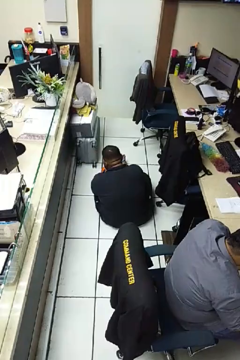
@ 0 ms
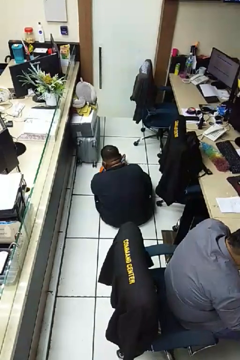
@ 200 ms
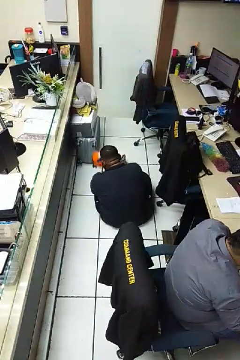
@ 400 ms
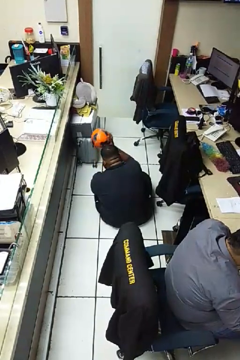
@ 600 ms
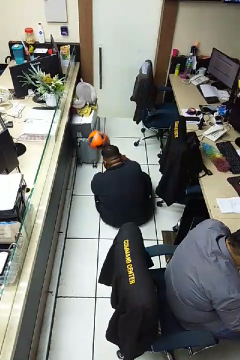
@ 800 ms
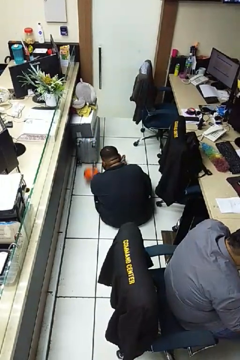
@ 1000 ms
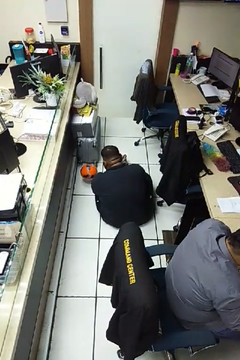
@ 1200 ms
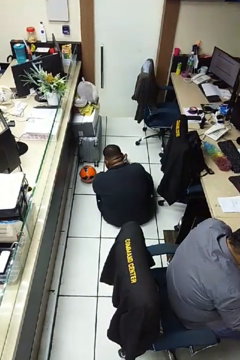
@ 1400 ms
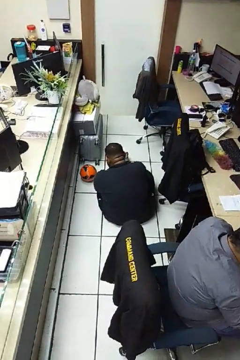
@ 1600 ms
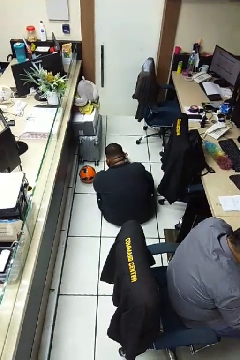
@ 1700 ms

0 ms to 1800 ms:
person bounces ball on floor

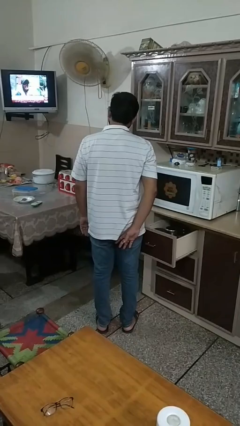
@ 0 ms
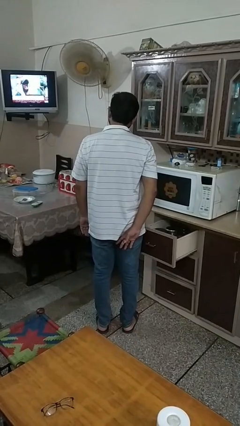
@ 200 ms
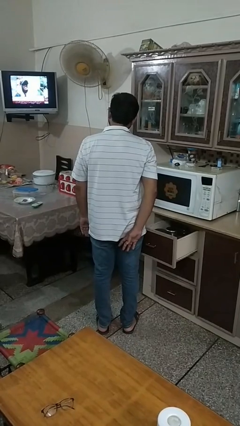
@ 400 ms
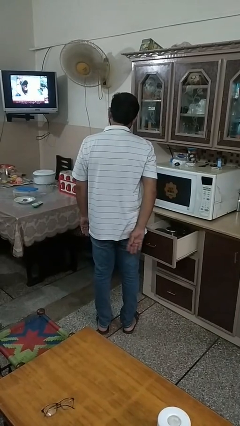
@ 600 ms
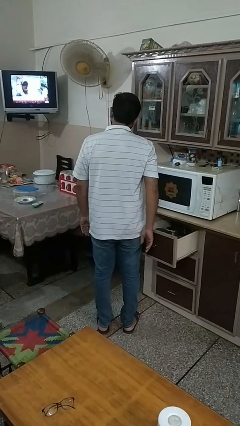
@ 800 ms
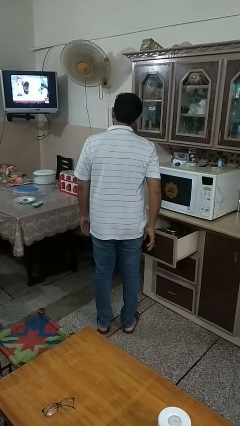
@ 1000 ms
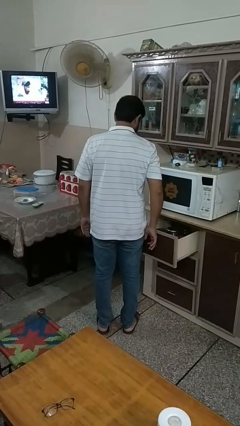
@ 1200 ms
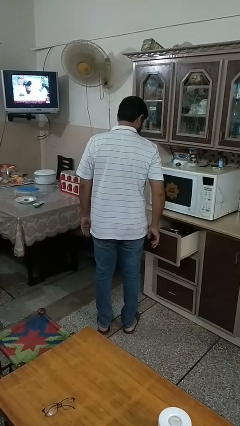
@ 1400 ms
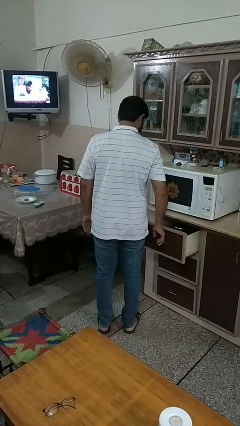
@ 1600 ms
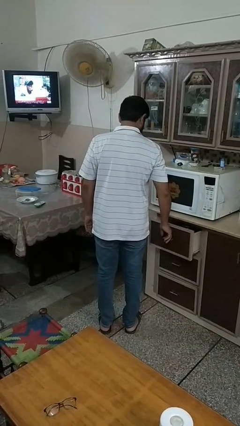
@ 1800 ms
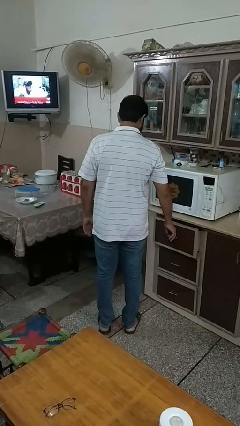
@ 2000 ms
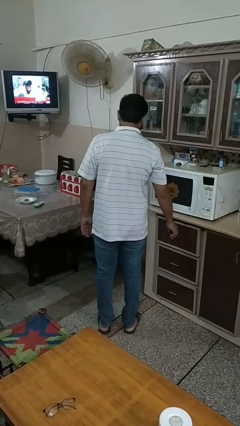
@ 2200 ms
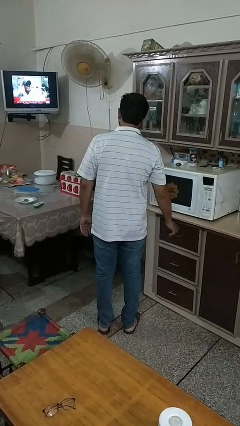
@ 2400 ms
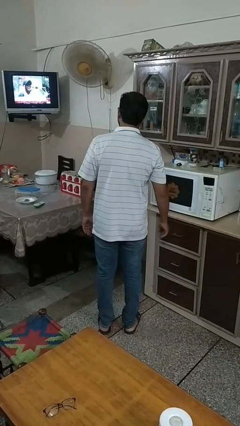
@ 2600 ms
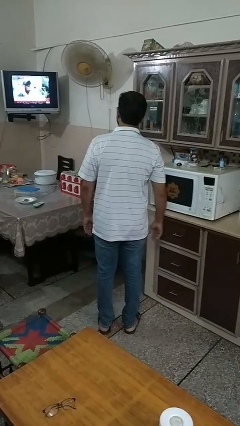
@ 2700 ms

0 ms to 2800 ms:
person closes kitchen drawer

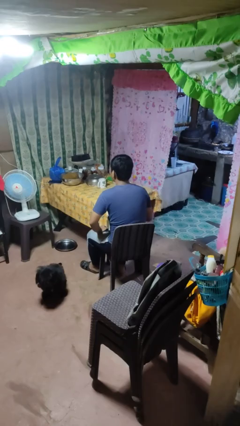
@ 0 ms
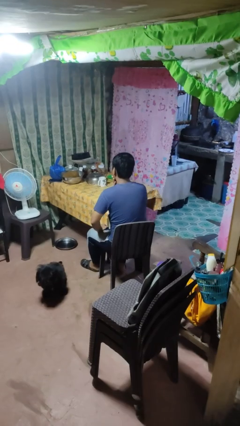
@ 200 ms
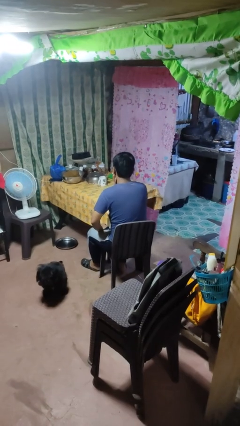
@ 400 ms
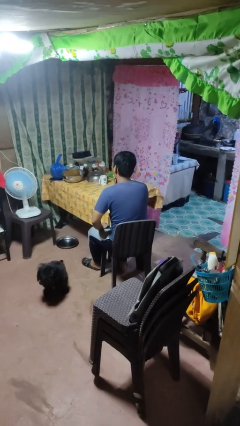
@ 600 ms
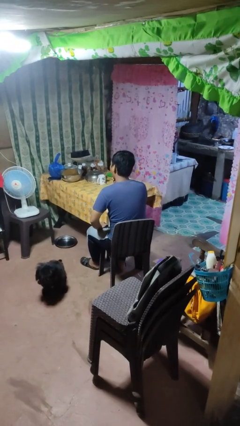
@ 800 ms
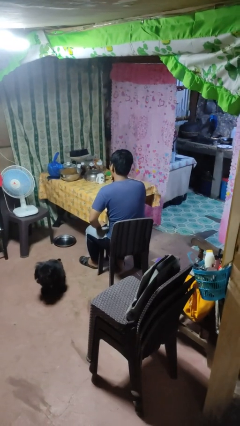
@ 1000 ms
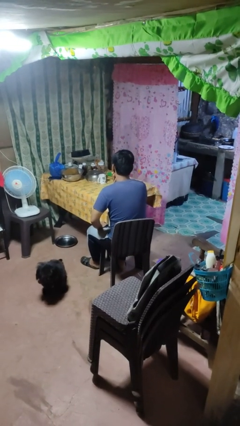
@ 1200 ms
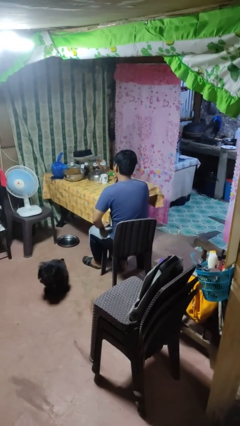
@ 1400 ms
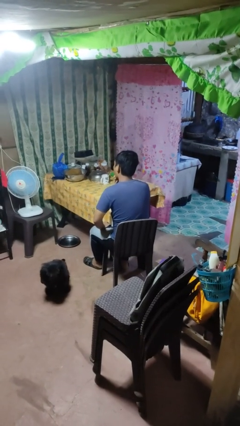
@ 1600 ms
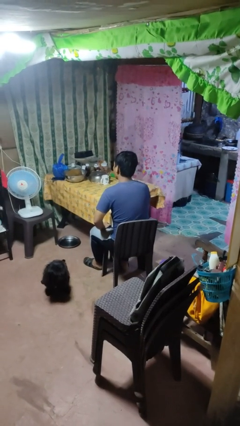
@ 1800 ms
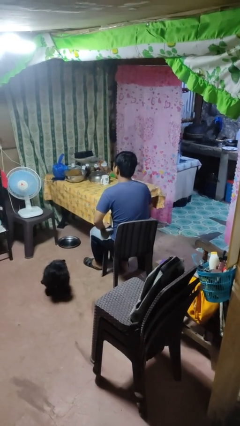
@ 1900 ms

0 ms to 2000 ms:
person strokes chin

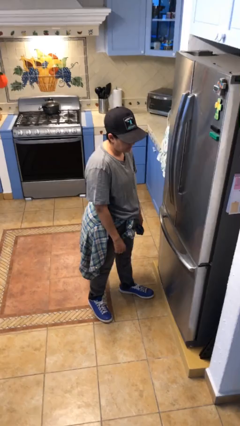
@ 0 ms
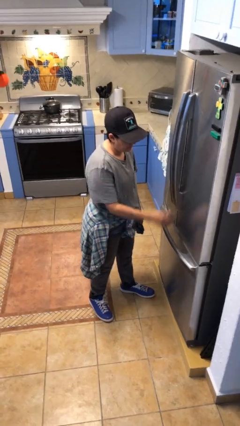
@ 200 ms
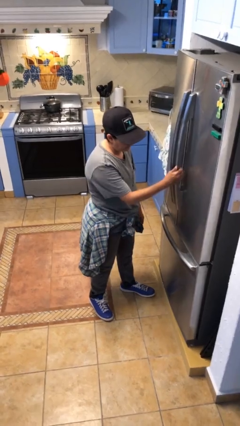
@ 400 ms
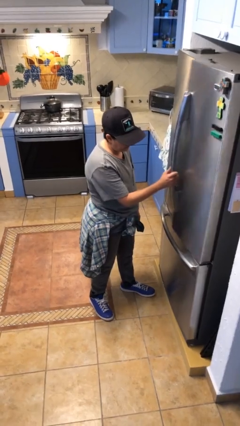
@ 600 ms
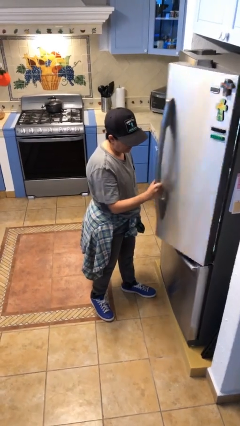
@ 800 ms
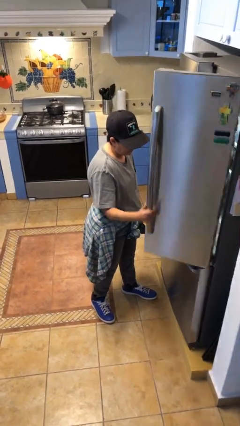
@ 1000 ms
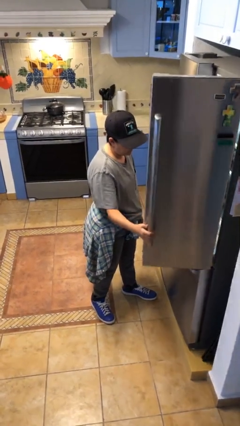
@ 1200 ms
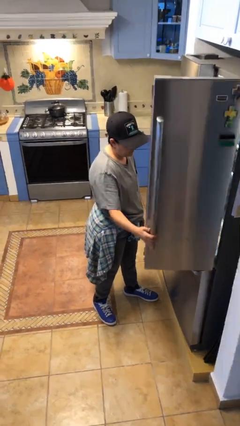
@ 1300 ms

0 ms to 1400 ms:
person opens refrigerator

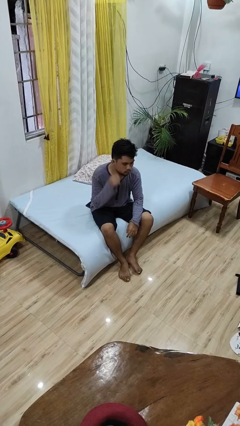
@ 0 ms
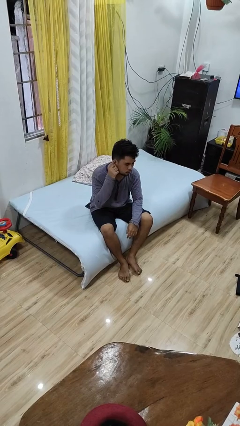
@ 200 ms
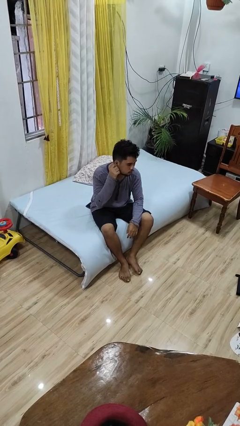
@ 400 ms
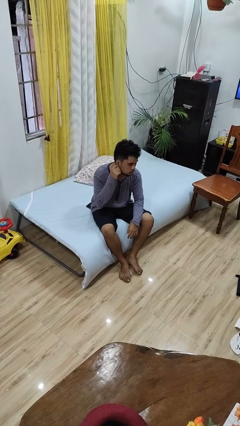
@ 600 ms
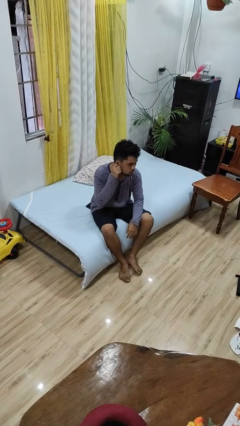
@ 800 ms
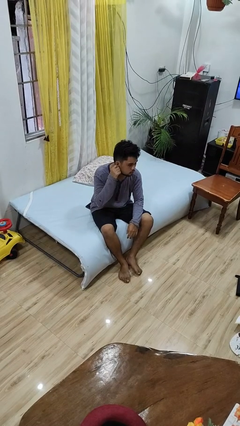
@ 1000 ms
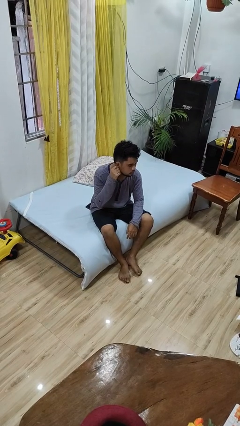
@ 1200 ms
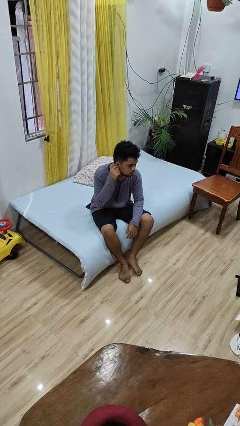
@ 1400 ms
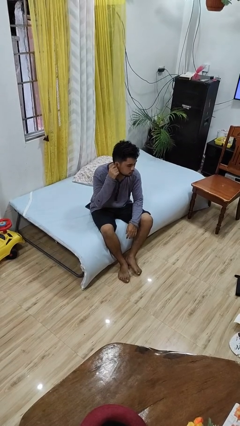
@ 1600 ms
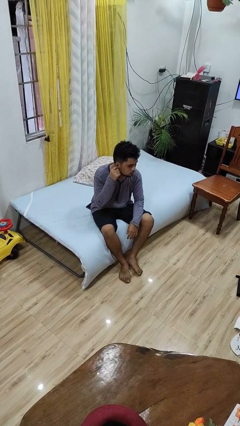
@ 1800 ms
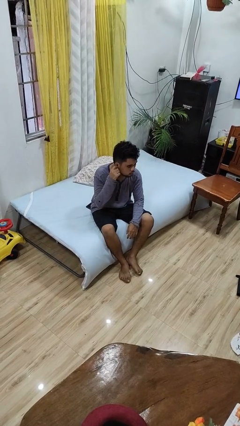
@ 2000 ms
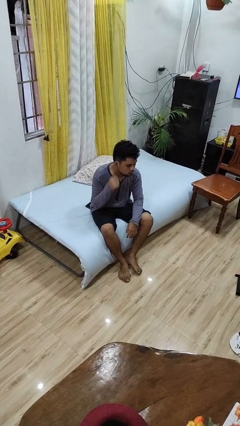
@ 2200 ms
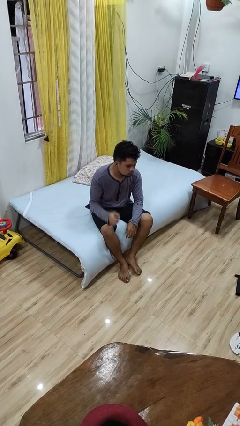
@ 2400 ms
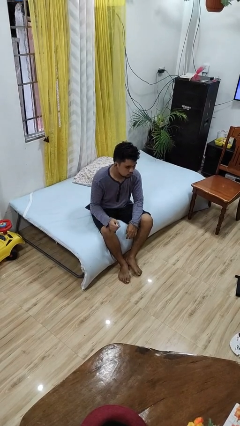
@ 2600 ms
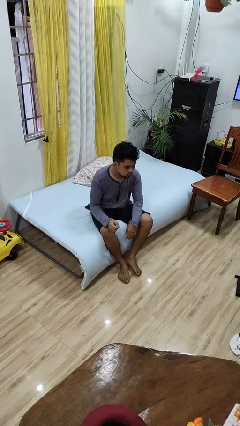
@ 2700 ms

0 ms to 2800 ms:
person touches earlobe

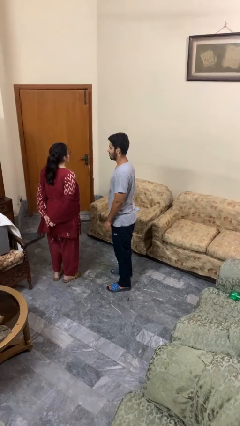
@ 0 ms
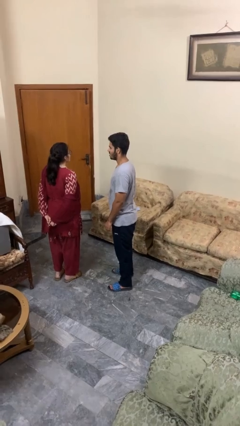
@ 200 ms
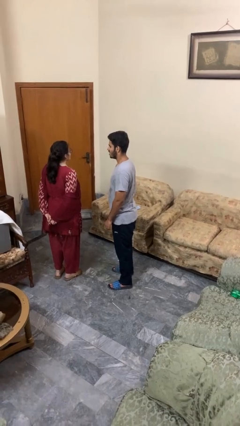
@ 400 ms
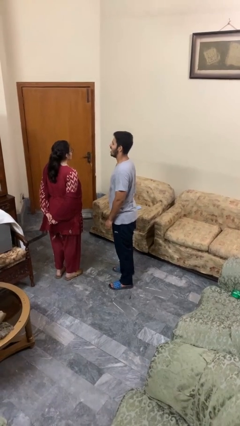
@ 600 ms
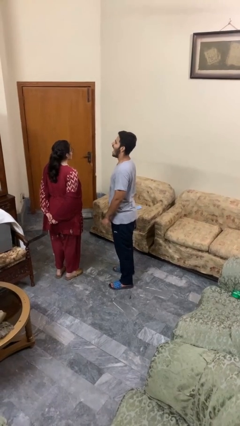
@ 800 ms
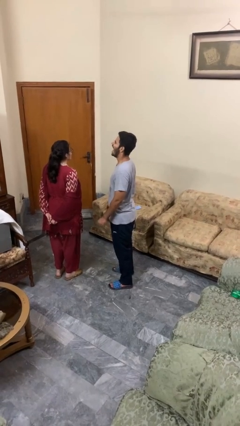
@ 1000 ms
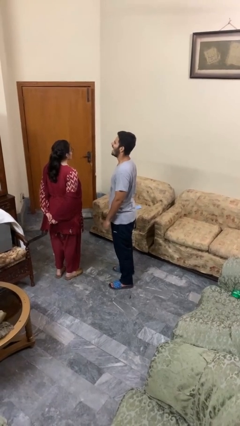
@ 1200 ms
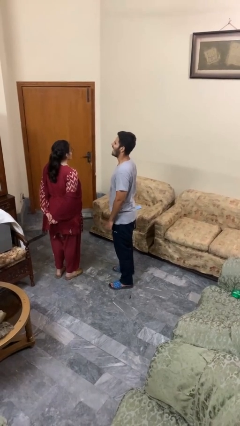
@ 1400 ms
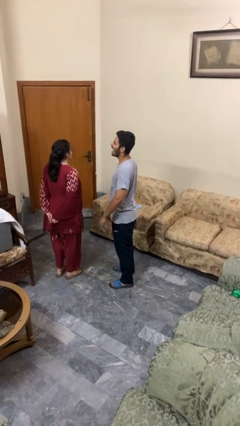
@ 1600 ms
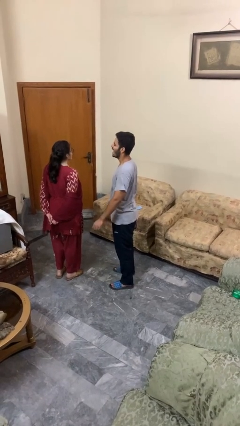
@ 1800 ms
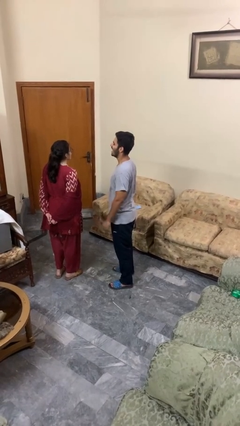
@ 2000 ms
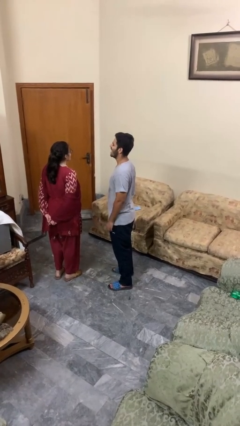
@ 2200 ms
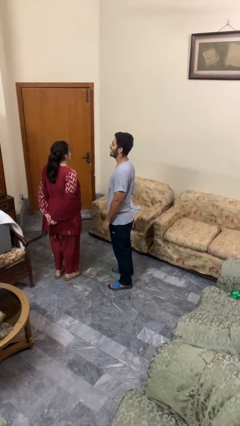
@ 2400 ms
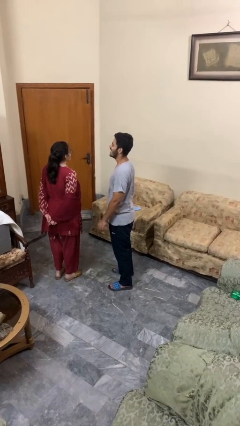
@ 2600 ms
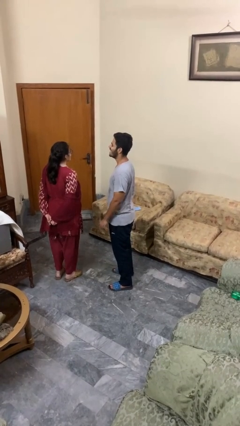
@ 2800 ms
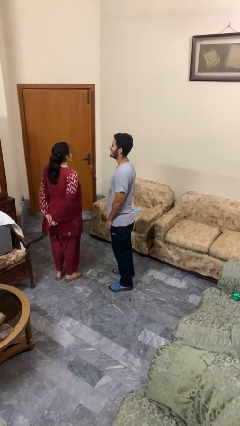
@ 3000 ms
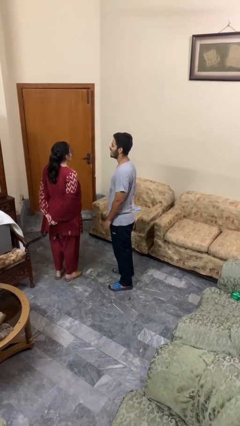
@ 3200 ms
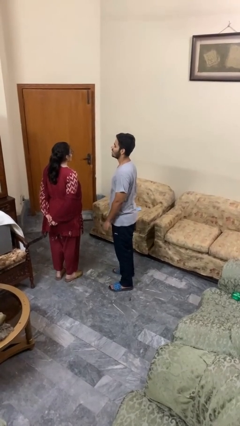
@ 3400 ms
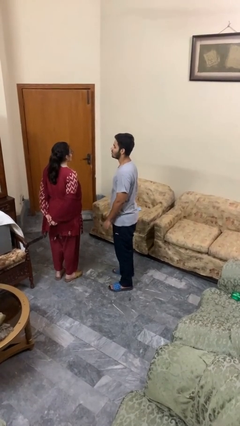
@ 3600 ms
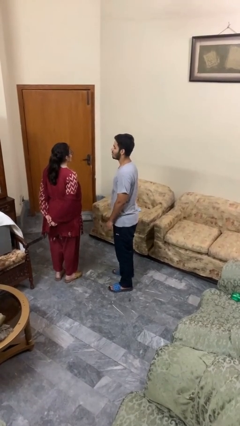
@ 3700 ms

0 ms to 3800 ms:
person laughs with person

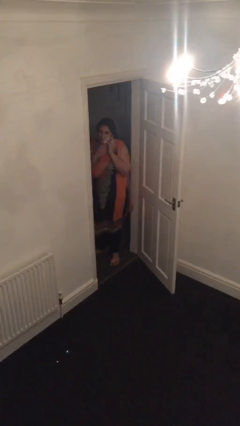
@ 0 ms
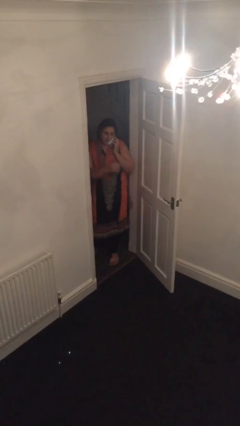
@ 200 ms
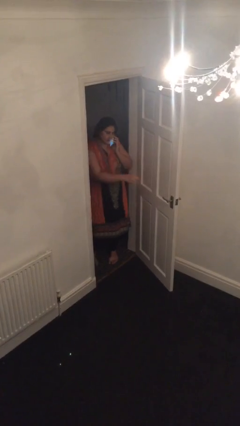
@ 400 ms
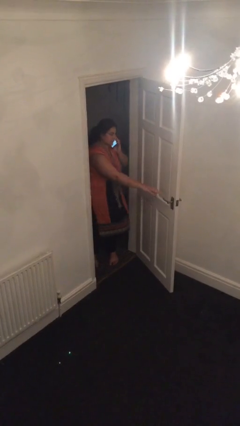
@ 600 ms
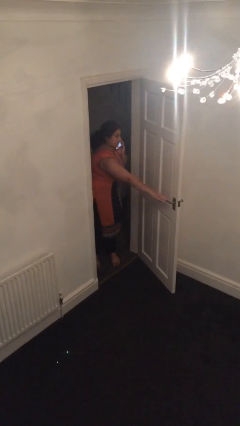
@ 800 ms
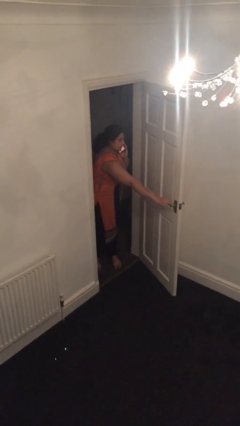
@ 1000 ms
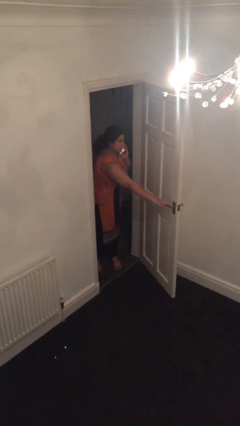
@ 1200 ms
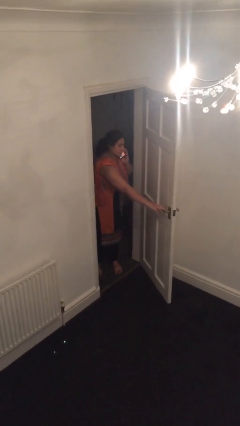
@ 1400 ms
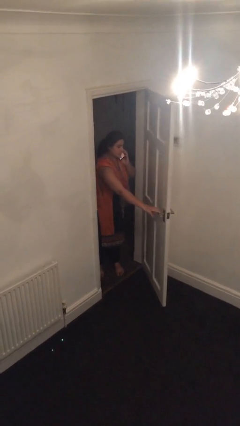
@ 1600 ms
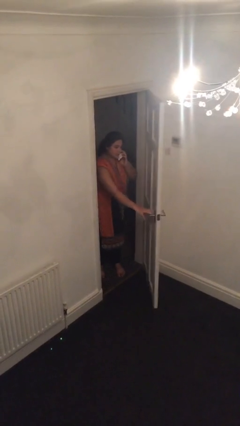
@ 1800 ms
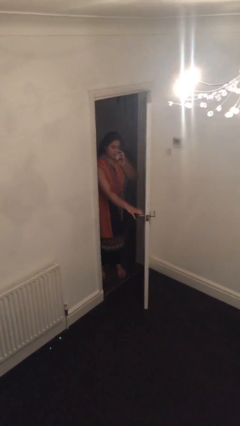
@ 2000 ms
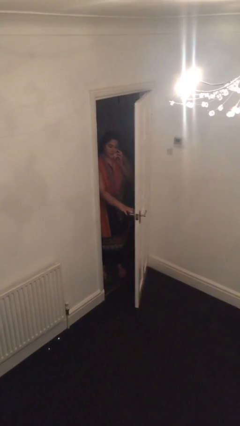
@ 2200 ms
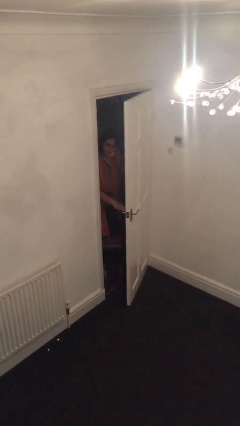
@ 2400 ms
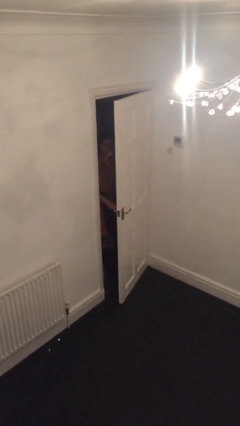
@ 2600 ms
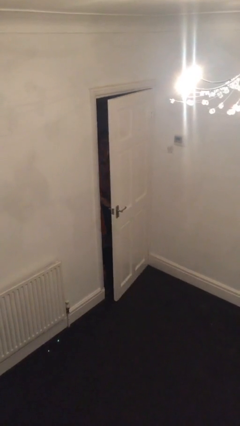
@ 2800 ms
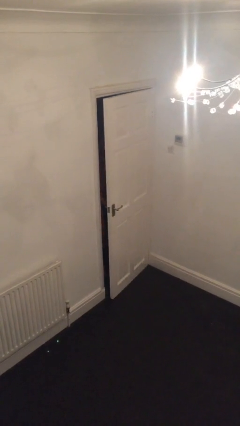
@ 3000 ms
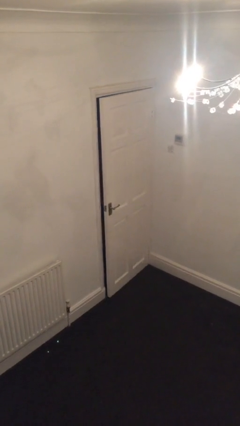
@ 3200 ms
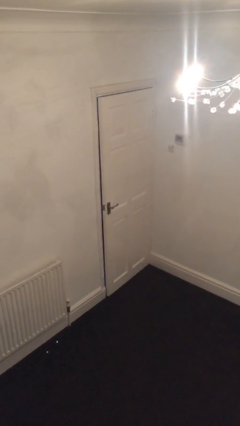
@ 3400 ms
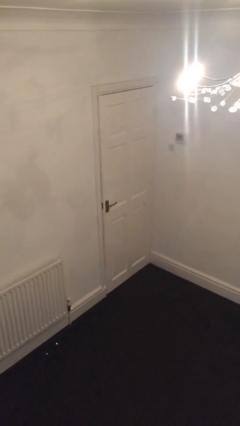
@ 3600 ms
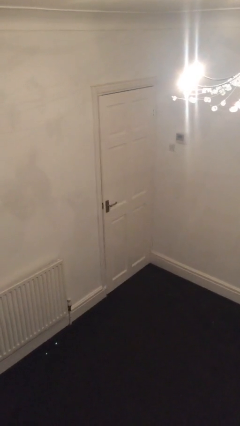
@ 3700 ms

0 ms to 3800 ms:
person closes facility door
